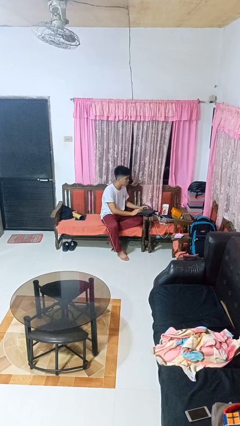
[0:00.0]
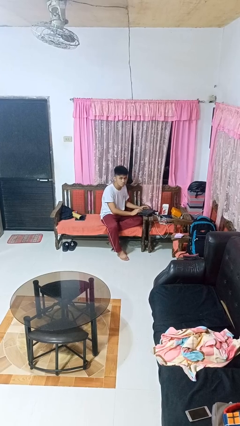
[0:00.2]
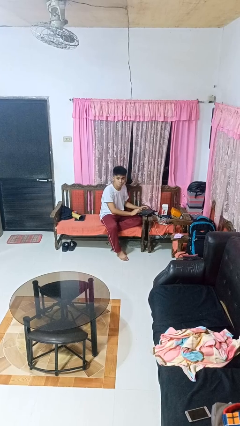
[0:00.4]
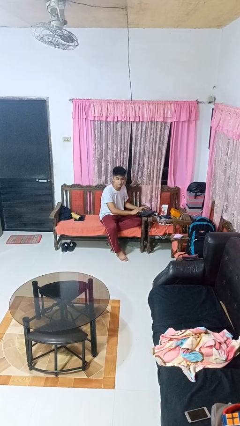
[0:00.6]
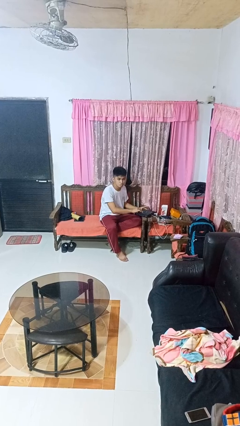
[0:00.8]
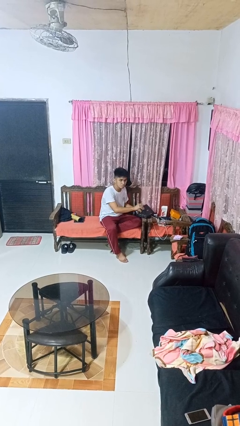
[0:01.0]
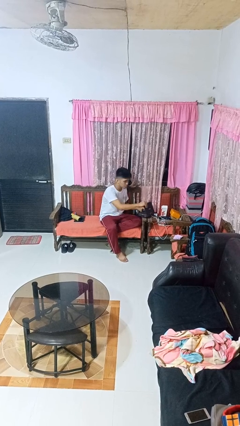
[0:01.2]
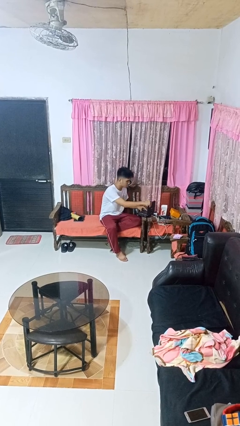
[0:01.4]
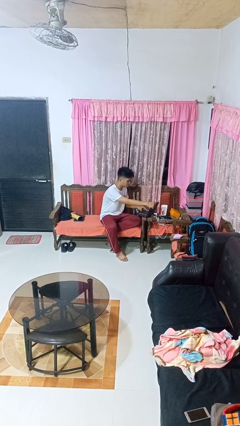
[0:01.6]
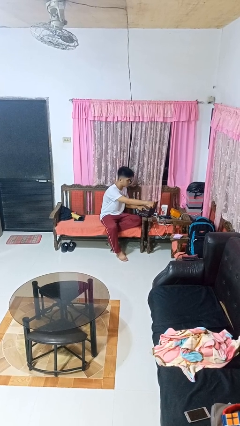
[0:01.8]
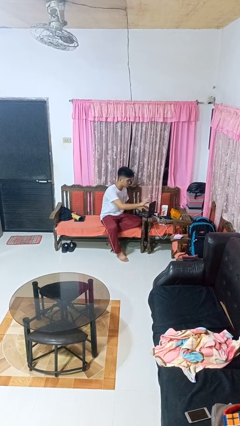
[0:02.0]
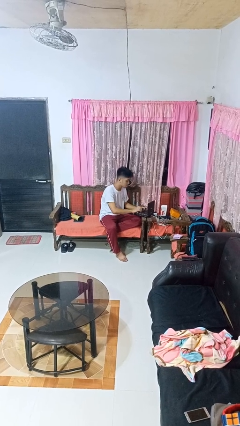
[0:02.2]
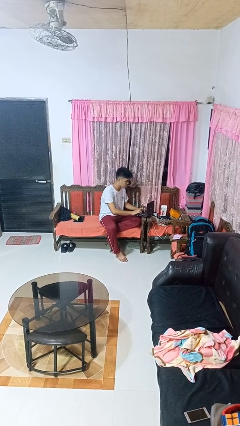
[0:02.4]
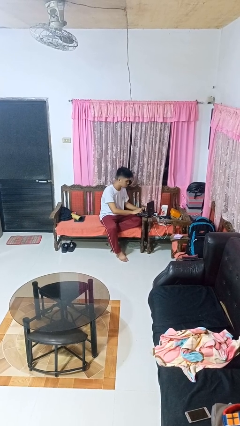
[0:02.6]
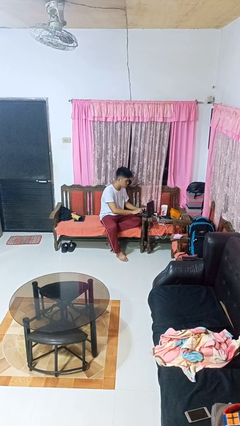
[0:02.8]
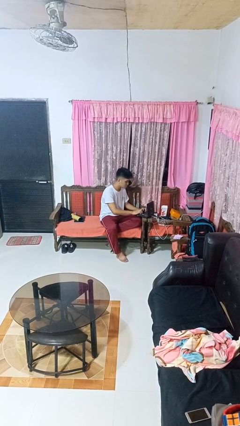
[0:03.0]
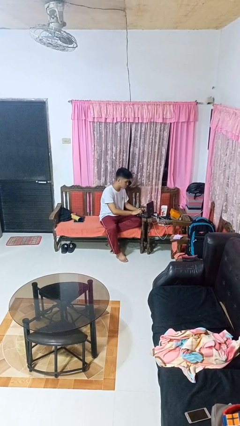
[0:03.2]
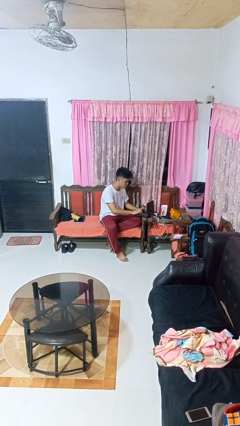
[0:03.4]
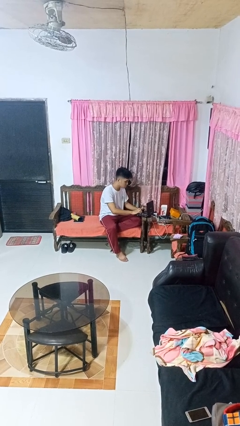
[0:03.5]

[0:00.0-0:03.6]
person opens laptop

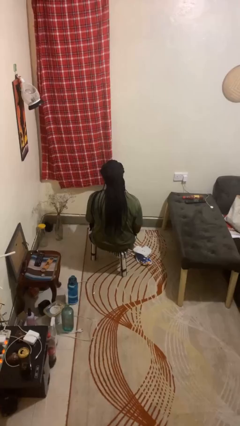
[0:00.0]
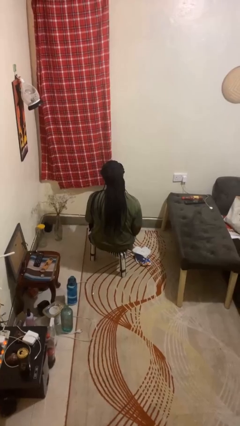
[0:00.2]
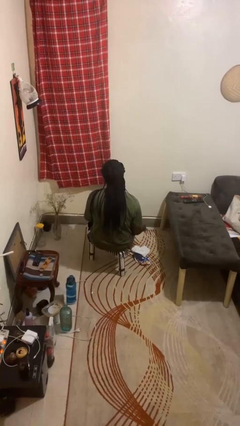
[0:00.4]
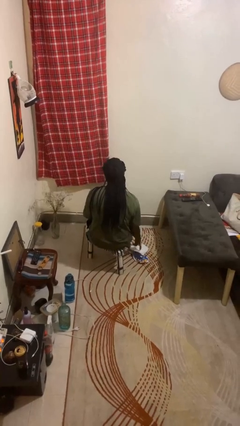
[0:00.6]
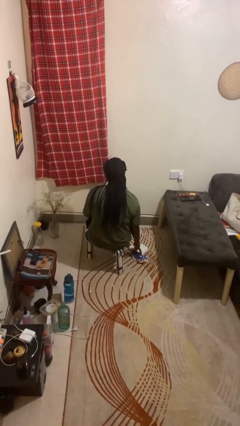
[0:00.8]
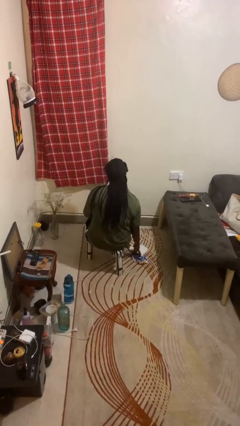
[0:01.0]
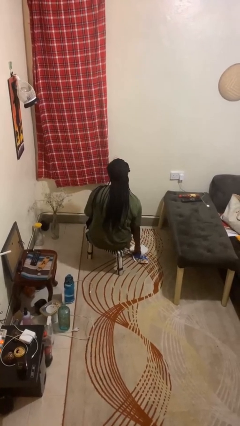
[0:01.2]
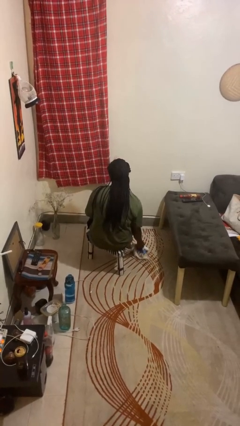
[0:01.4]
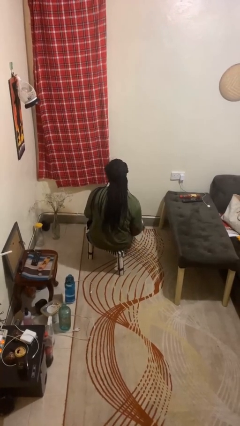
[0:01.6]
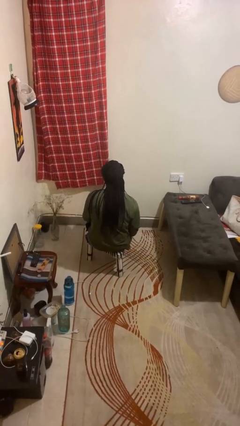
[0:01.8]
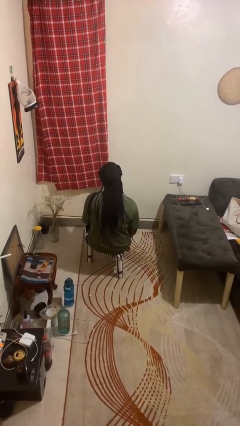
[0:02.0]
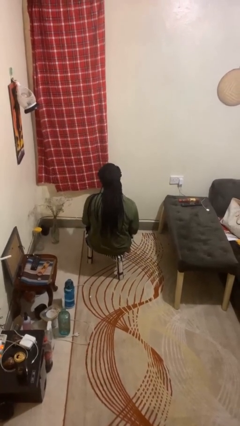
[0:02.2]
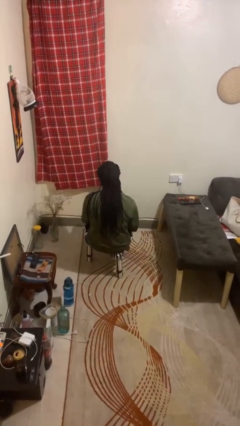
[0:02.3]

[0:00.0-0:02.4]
person picks up object from floor

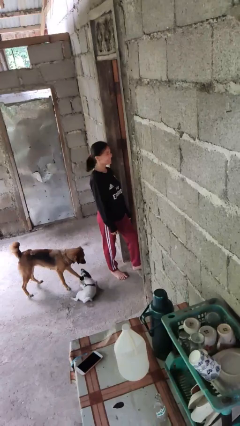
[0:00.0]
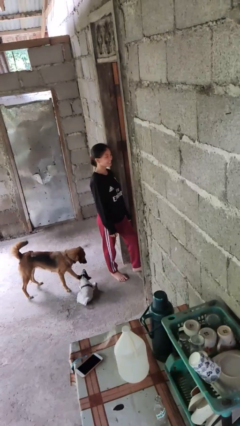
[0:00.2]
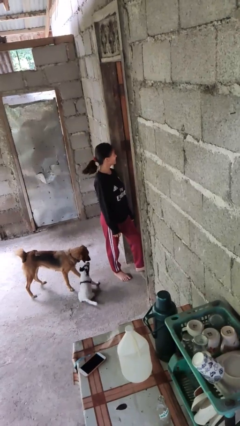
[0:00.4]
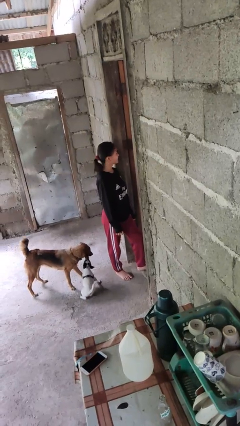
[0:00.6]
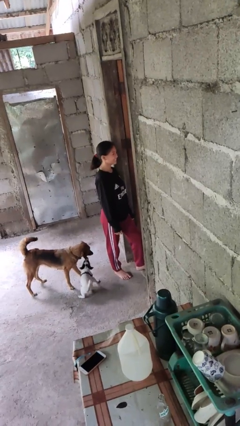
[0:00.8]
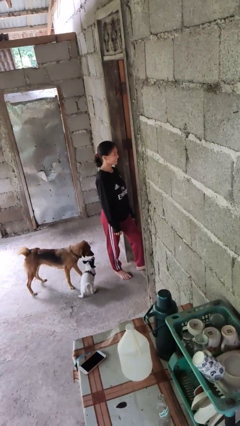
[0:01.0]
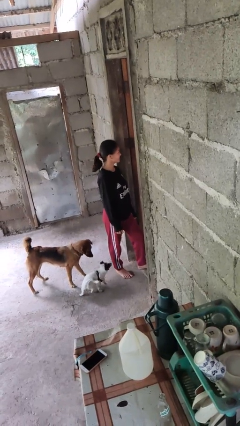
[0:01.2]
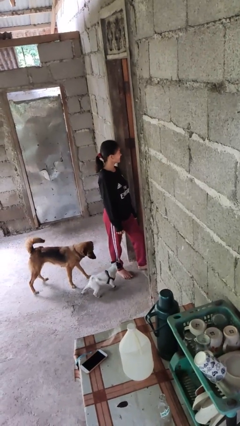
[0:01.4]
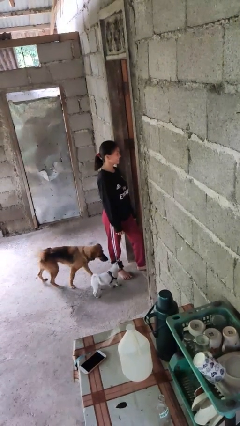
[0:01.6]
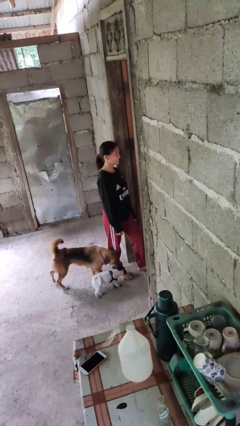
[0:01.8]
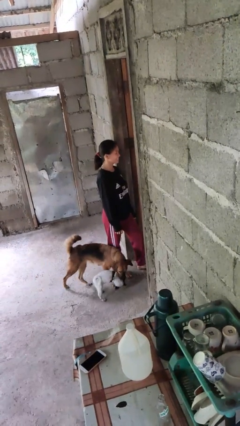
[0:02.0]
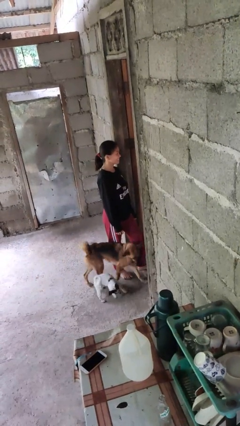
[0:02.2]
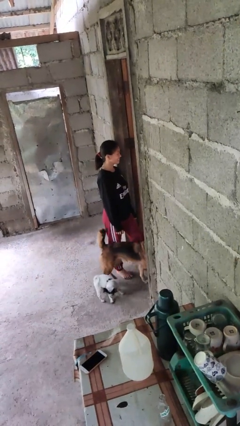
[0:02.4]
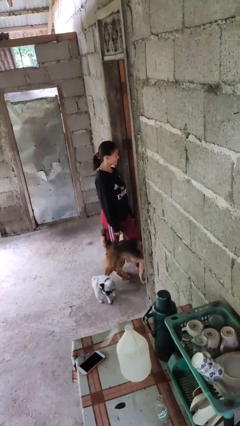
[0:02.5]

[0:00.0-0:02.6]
person shakes head

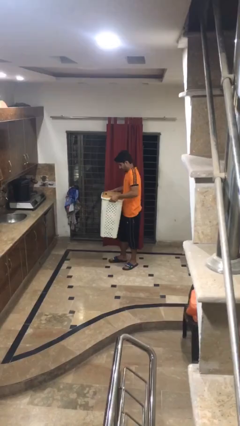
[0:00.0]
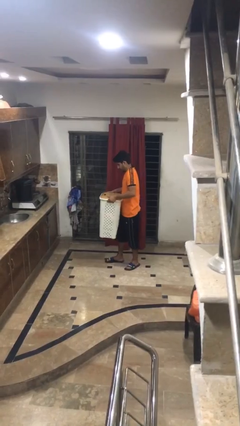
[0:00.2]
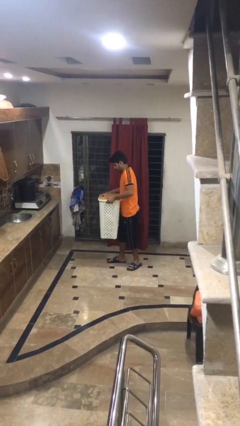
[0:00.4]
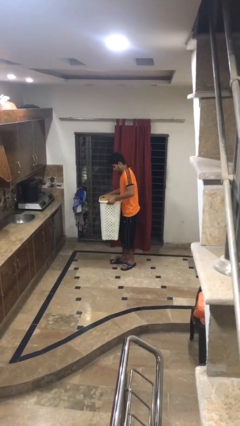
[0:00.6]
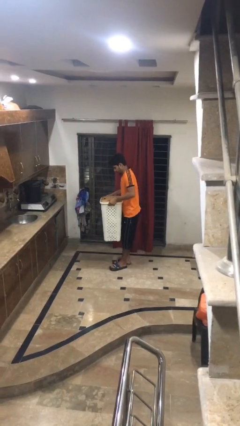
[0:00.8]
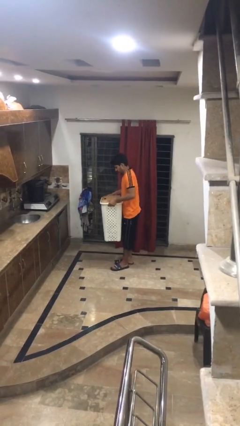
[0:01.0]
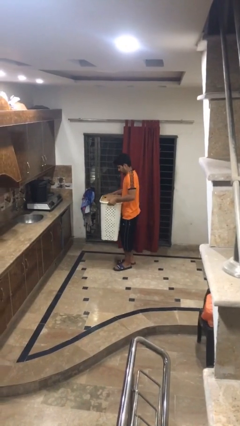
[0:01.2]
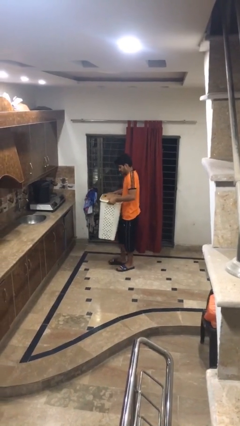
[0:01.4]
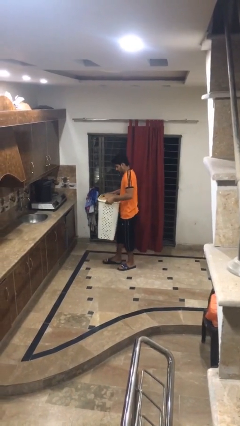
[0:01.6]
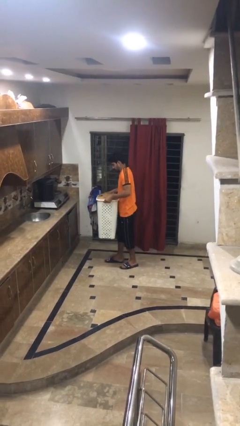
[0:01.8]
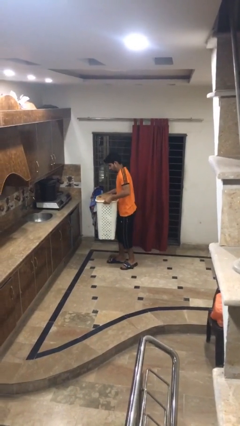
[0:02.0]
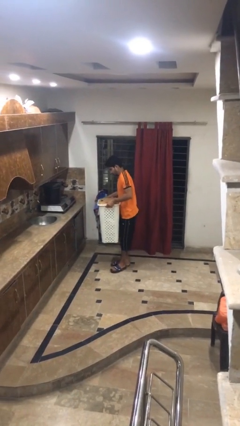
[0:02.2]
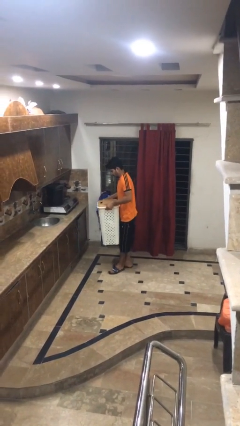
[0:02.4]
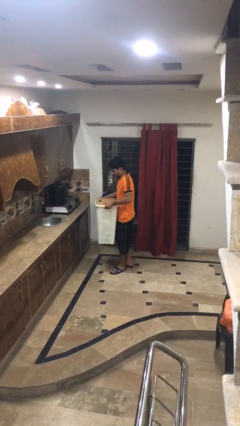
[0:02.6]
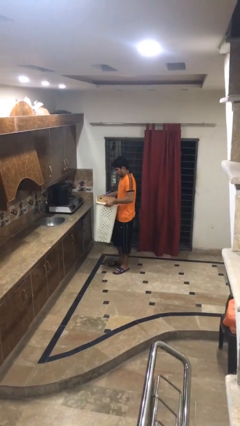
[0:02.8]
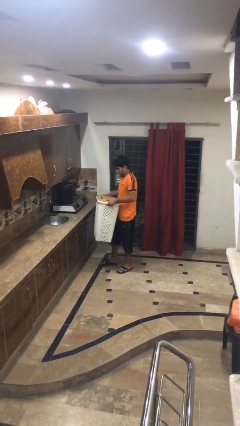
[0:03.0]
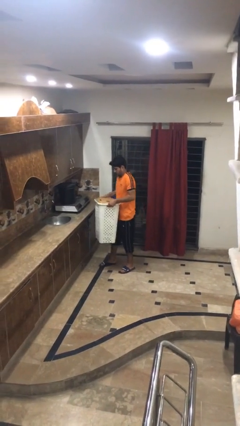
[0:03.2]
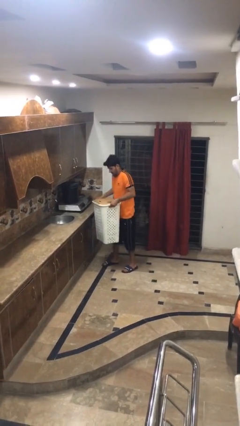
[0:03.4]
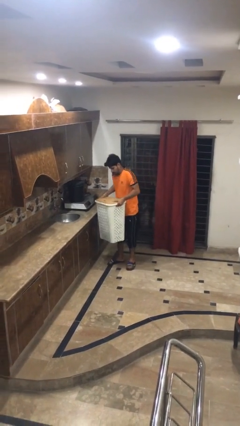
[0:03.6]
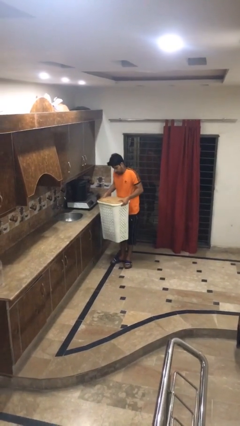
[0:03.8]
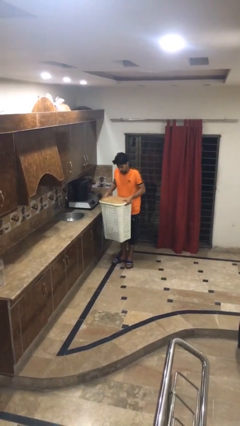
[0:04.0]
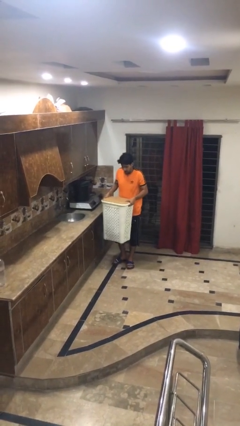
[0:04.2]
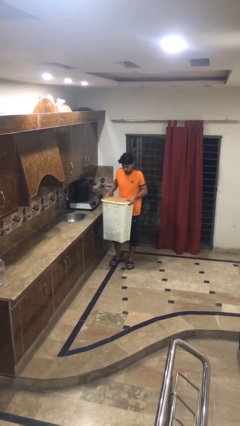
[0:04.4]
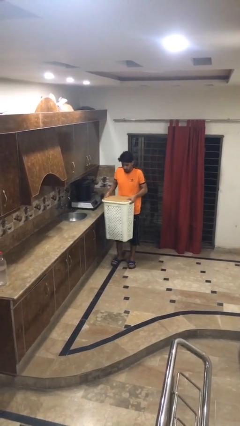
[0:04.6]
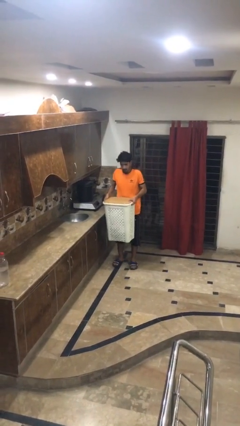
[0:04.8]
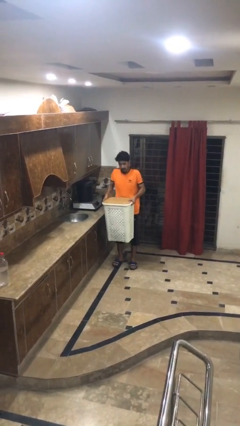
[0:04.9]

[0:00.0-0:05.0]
person carries laundry basket

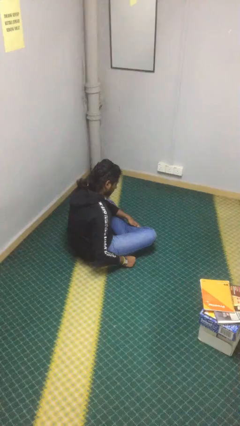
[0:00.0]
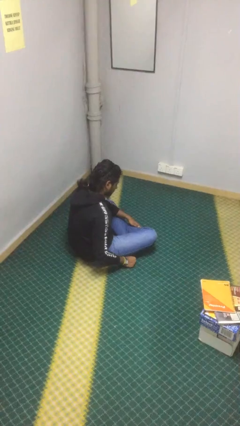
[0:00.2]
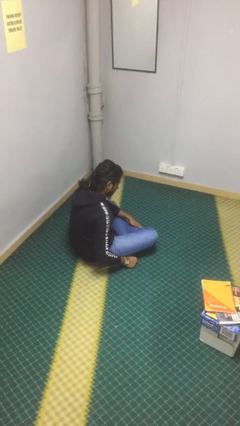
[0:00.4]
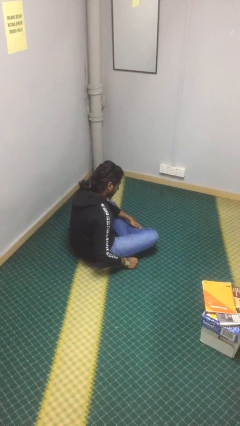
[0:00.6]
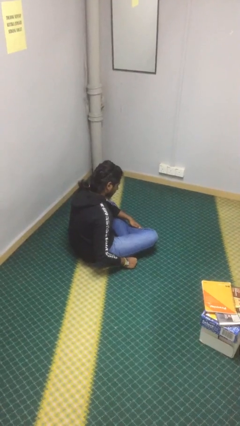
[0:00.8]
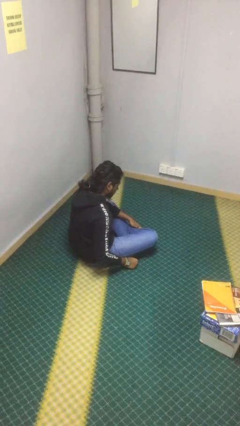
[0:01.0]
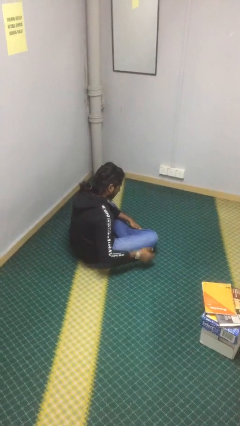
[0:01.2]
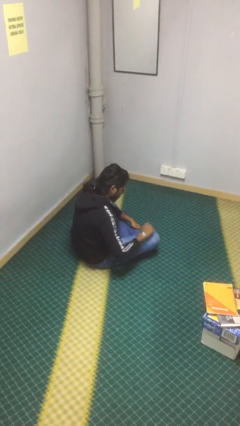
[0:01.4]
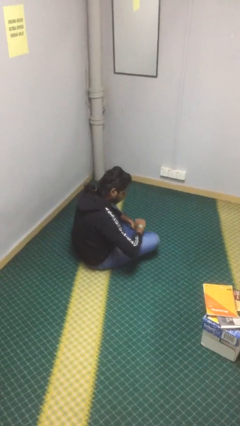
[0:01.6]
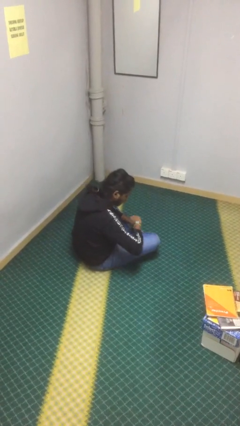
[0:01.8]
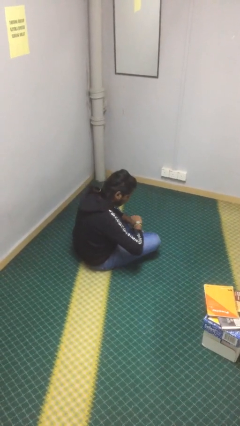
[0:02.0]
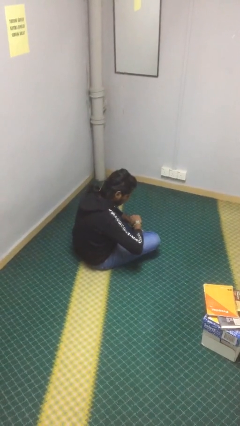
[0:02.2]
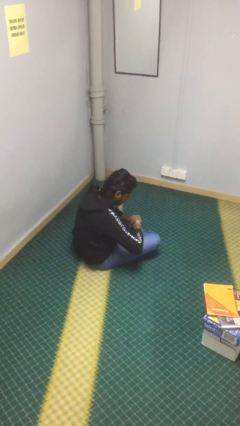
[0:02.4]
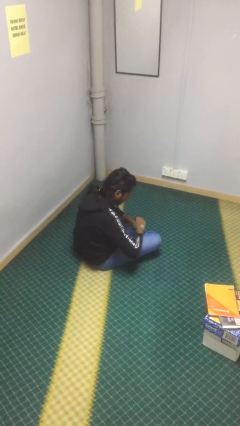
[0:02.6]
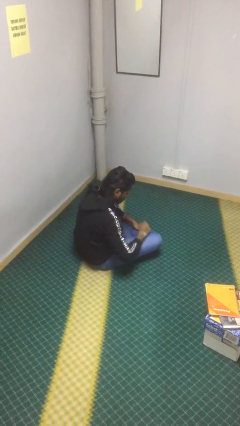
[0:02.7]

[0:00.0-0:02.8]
person looks at wristwatch

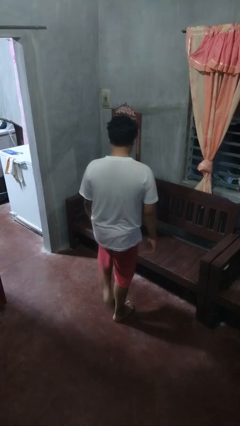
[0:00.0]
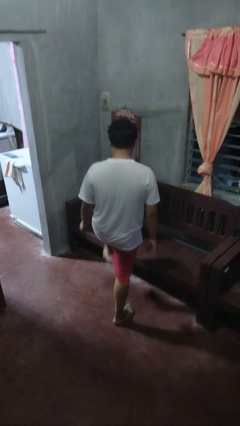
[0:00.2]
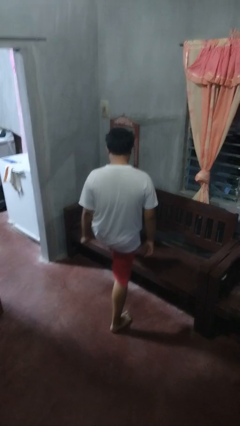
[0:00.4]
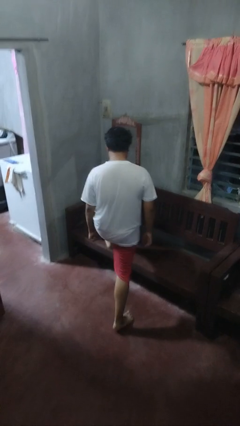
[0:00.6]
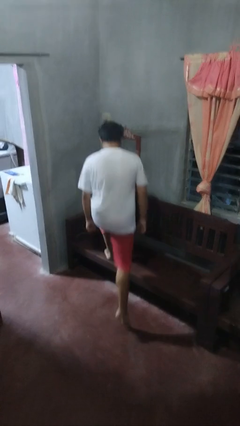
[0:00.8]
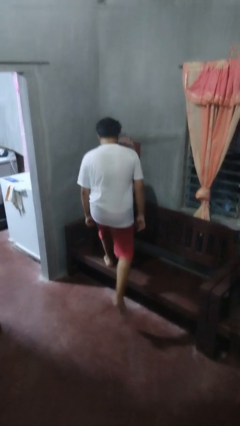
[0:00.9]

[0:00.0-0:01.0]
person climbs on couch
